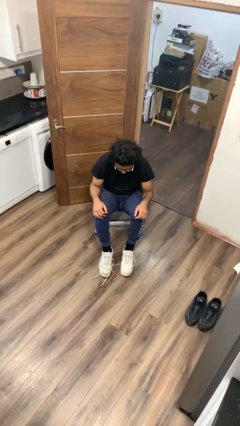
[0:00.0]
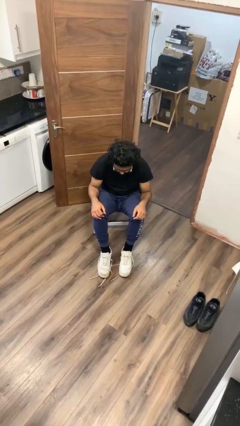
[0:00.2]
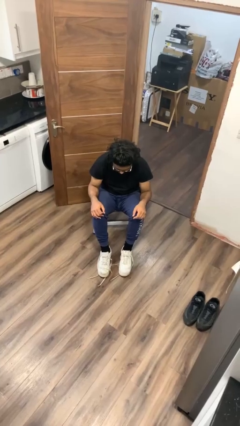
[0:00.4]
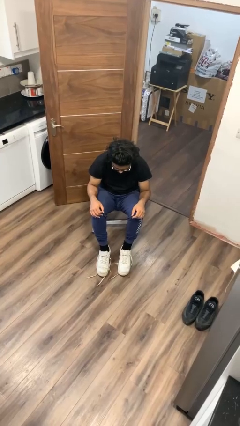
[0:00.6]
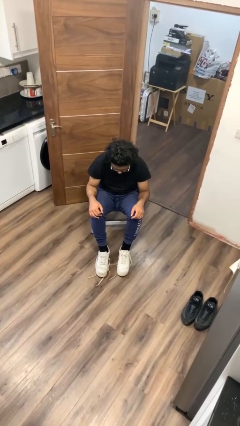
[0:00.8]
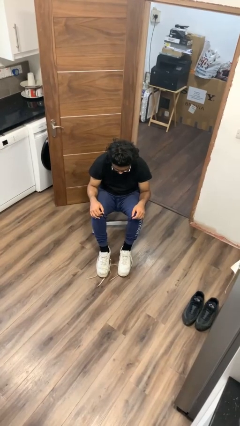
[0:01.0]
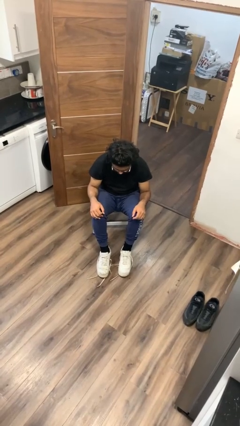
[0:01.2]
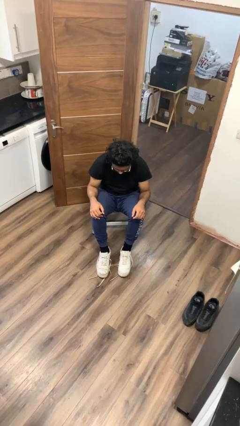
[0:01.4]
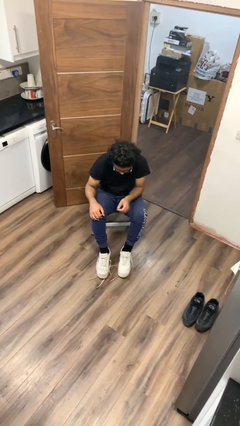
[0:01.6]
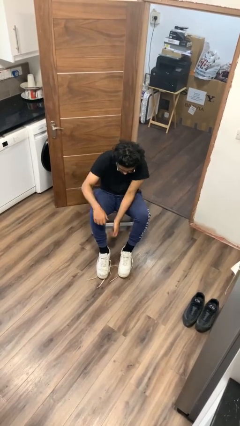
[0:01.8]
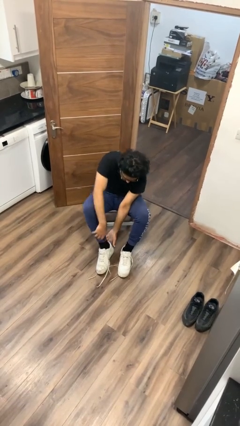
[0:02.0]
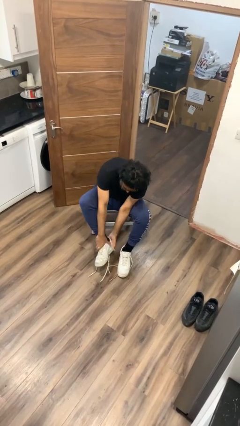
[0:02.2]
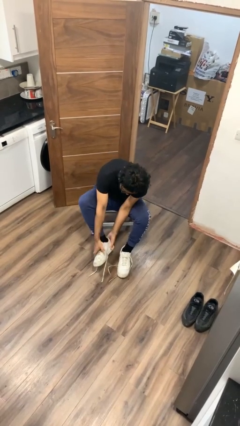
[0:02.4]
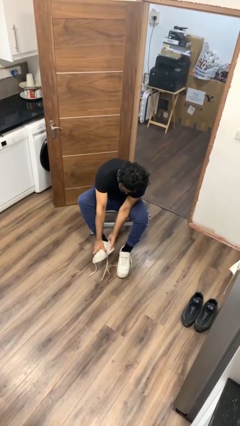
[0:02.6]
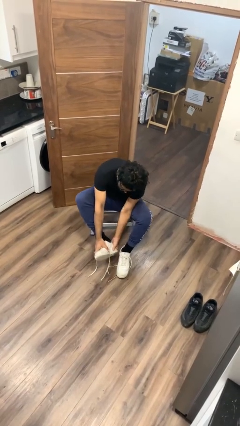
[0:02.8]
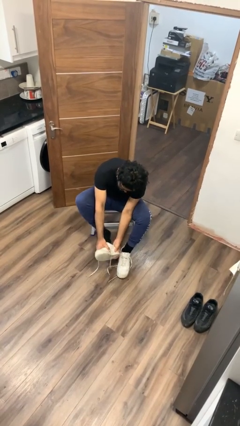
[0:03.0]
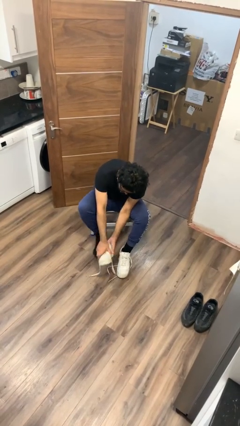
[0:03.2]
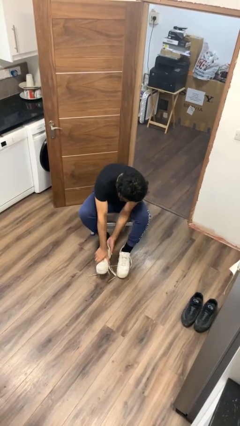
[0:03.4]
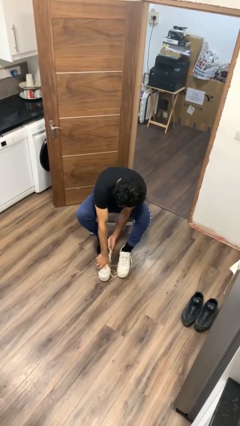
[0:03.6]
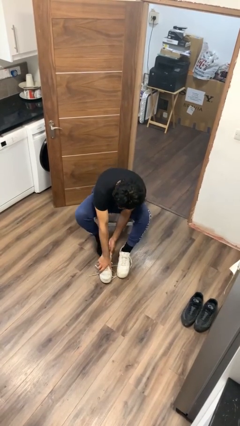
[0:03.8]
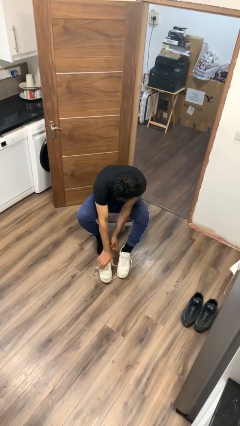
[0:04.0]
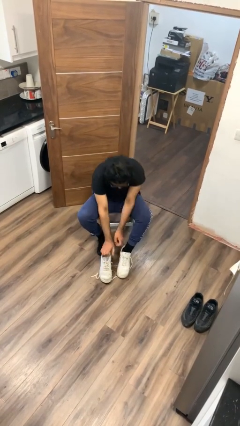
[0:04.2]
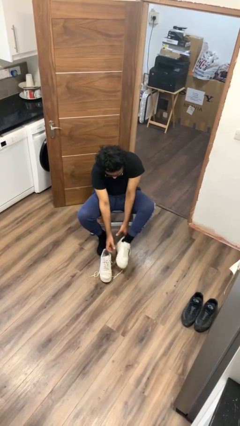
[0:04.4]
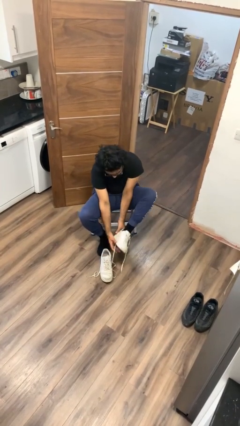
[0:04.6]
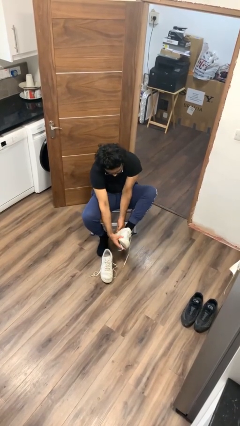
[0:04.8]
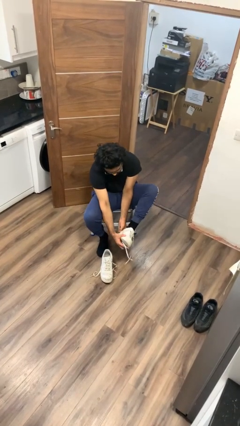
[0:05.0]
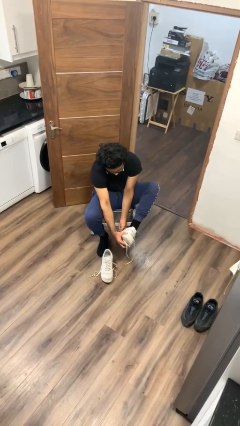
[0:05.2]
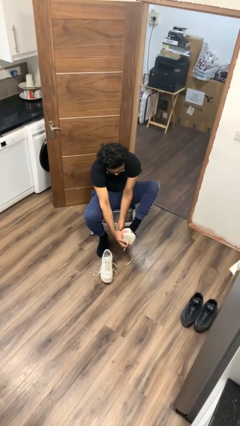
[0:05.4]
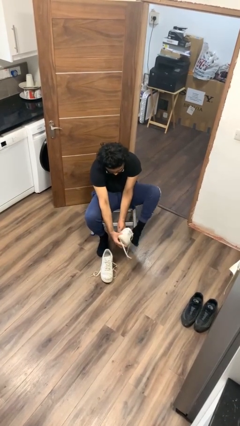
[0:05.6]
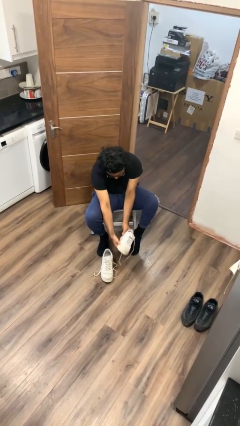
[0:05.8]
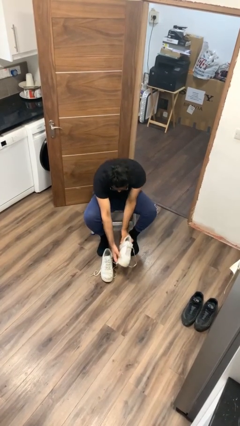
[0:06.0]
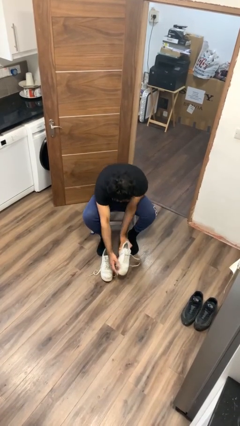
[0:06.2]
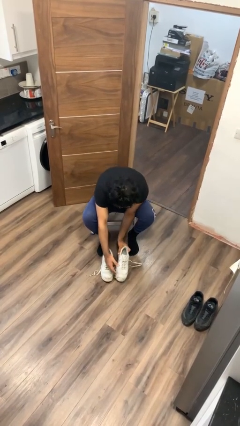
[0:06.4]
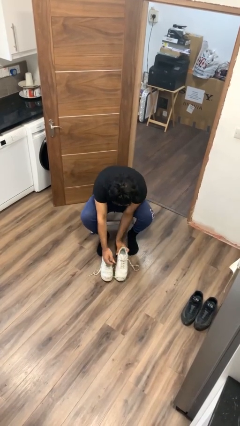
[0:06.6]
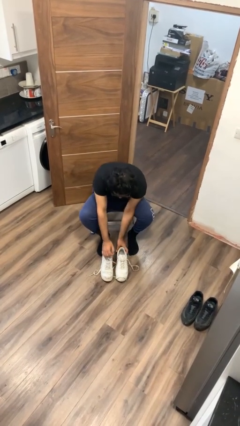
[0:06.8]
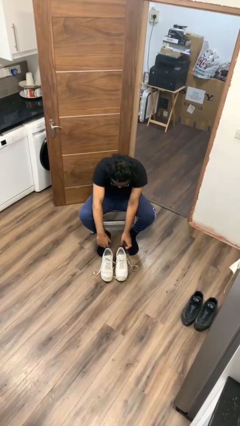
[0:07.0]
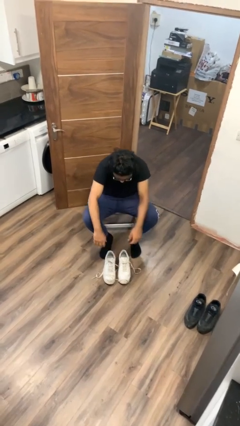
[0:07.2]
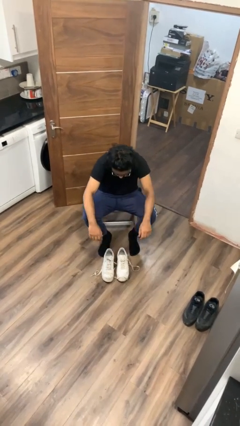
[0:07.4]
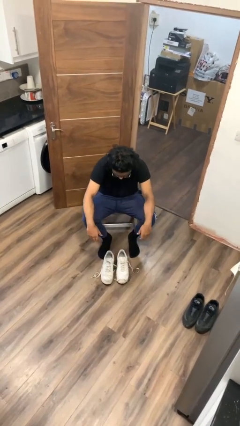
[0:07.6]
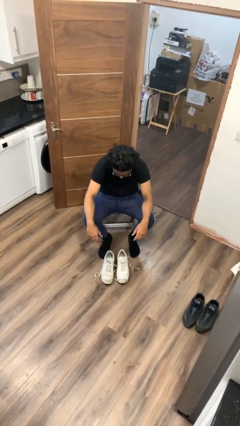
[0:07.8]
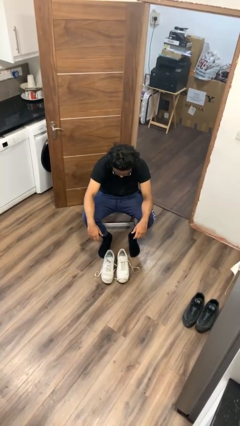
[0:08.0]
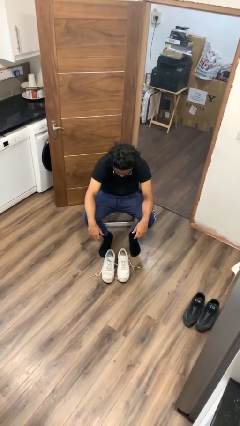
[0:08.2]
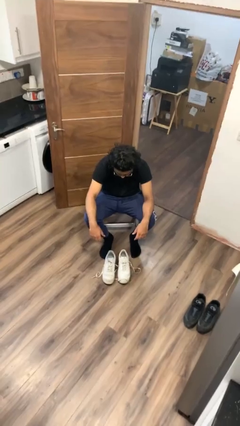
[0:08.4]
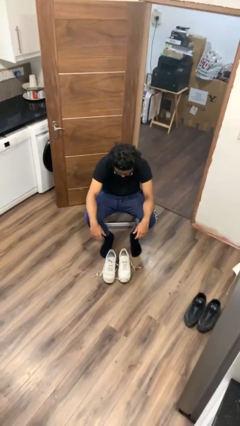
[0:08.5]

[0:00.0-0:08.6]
person takes off shoes

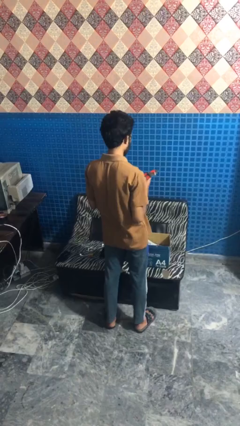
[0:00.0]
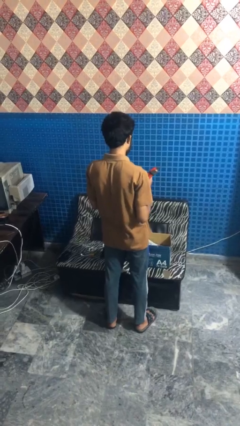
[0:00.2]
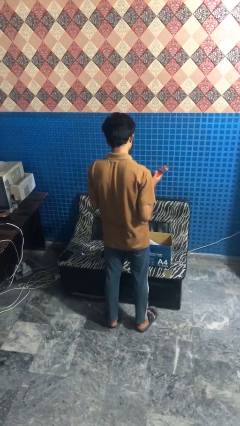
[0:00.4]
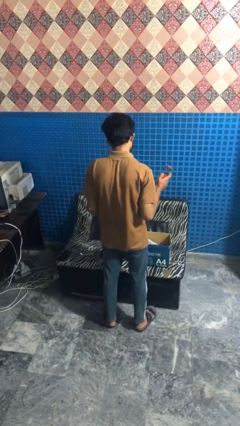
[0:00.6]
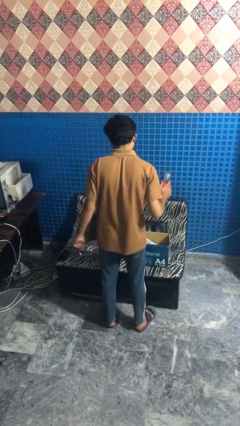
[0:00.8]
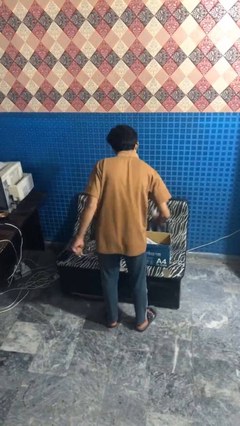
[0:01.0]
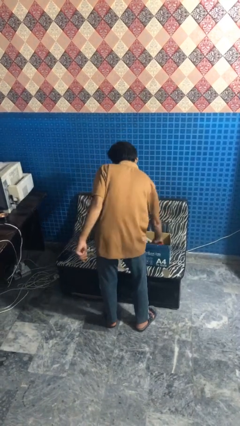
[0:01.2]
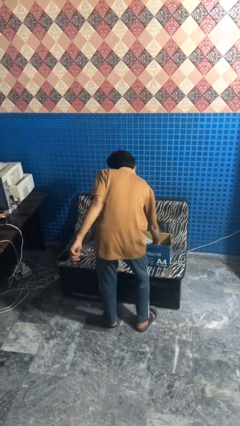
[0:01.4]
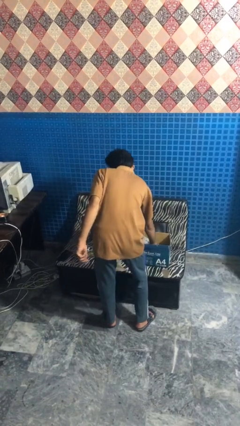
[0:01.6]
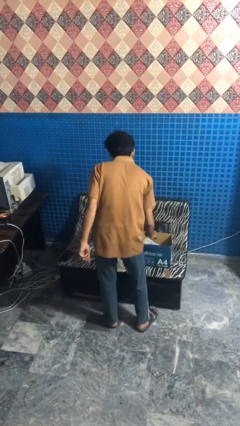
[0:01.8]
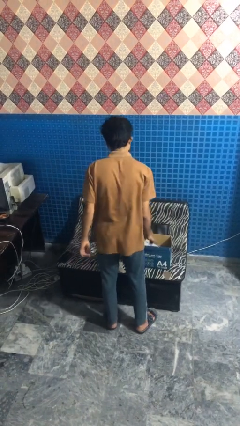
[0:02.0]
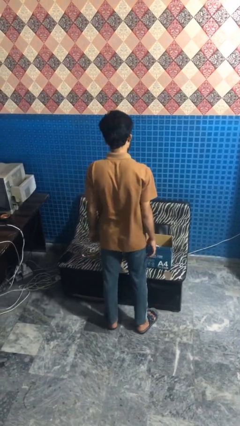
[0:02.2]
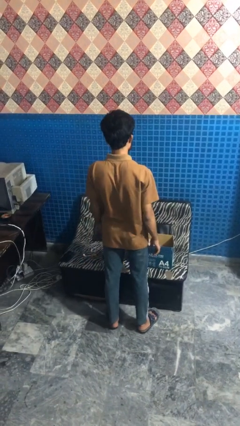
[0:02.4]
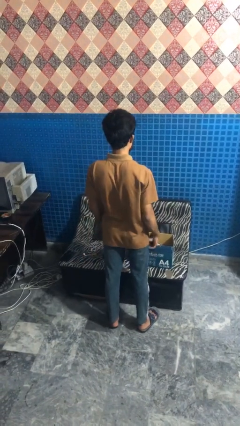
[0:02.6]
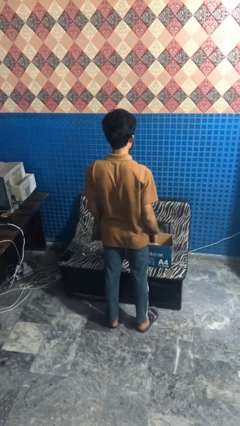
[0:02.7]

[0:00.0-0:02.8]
person puts object into box

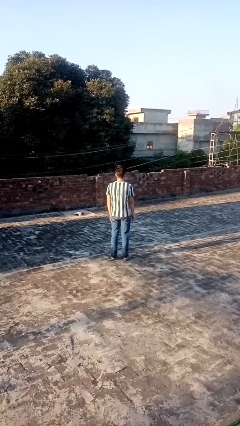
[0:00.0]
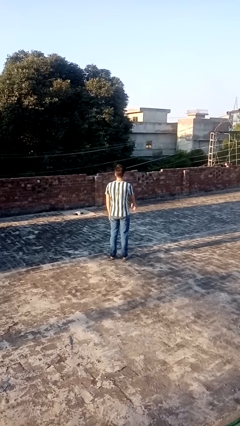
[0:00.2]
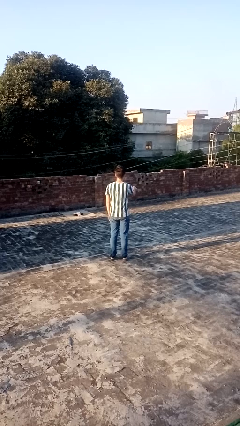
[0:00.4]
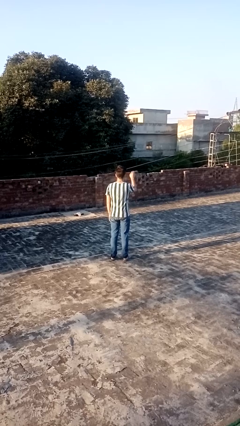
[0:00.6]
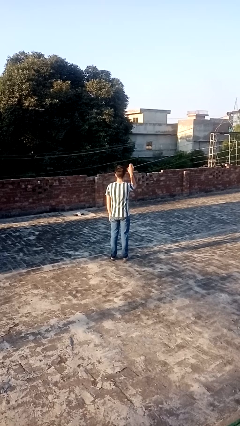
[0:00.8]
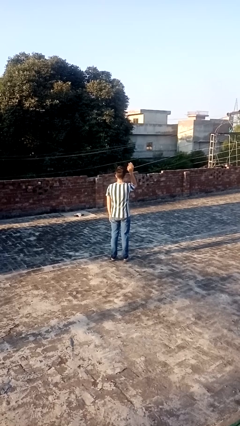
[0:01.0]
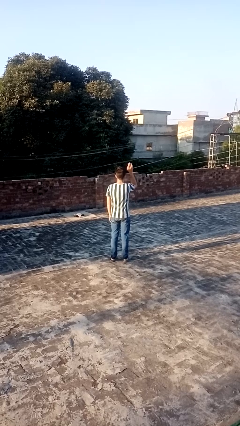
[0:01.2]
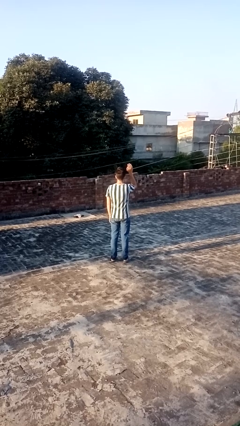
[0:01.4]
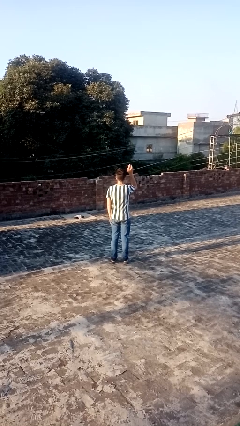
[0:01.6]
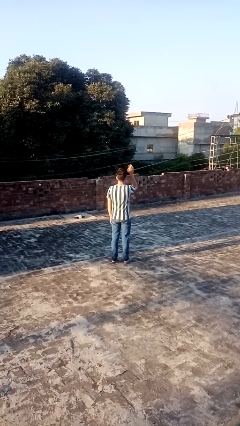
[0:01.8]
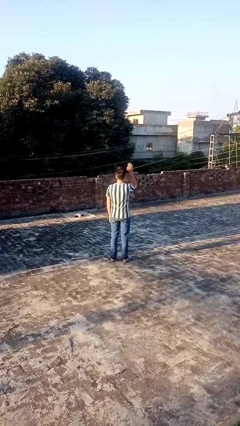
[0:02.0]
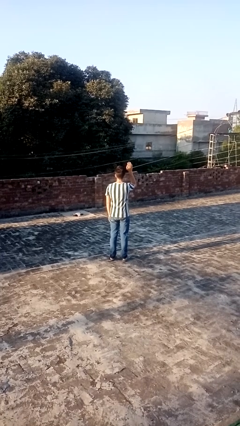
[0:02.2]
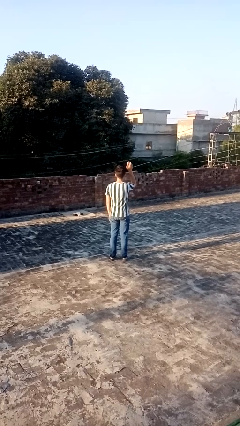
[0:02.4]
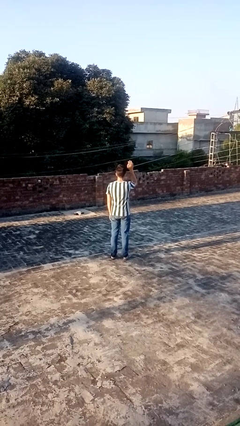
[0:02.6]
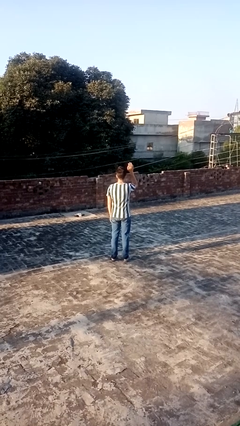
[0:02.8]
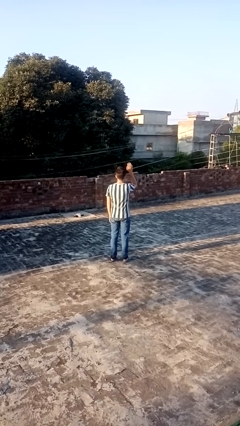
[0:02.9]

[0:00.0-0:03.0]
person gestures raise hand

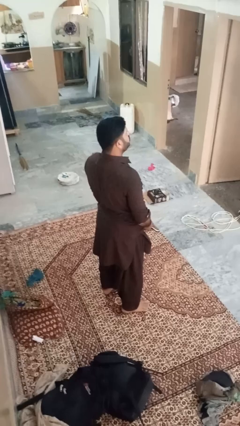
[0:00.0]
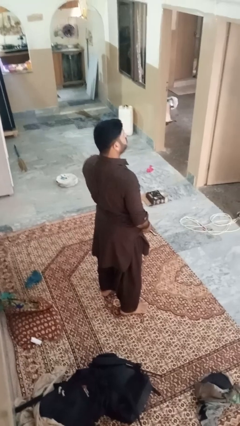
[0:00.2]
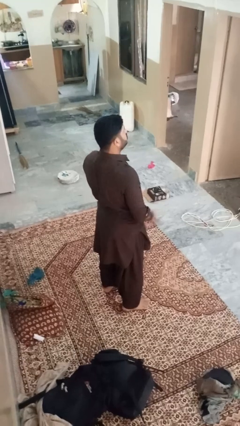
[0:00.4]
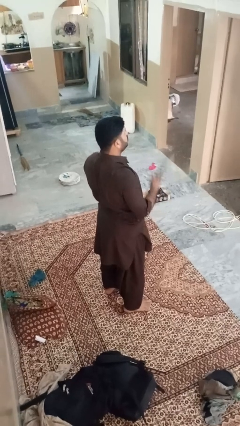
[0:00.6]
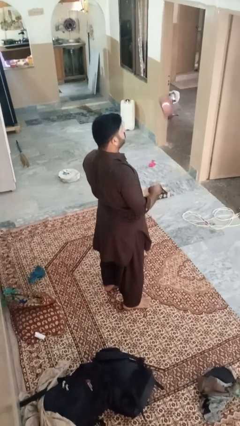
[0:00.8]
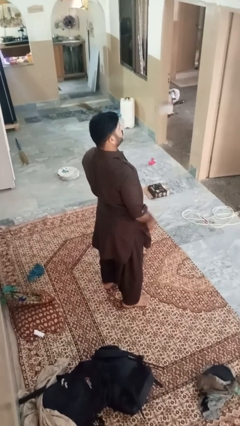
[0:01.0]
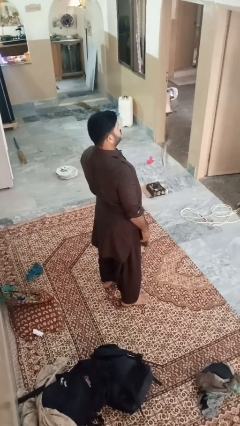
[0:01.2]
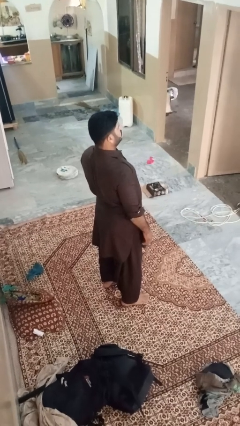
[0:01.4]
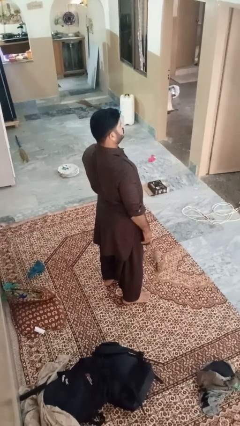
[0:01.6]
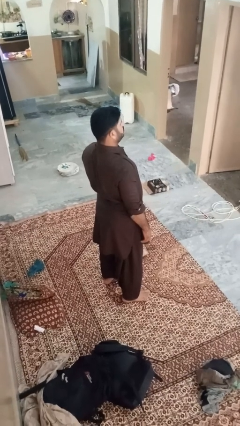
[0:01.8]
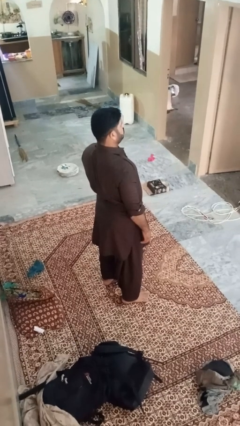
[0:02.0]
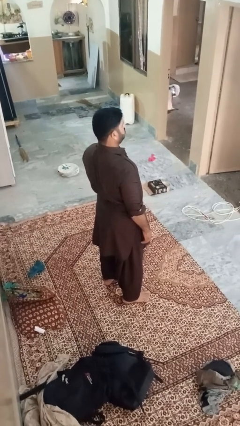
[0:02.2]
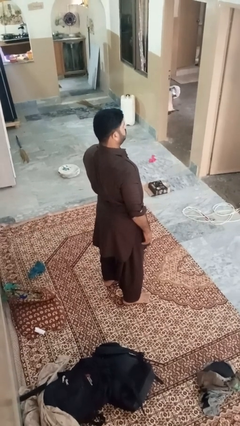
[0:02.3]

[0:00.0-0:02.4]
person throws object into air

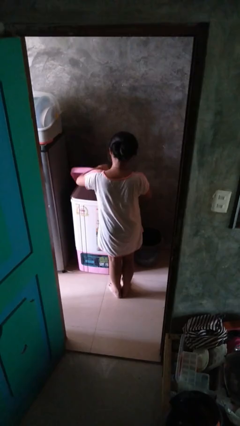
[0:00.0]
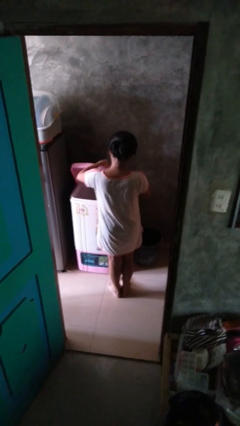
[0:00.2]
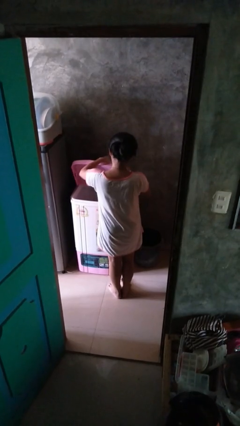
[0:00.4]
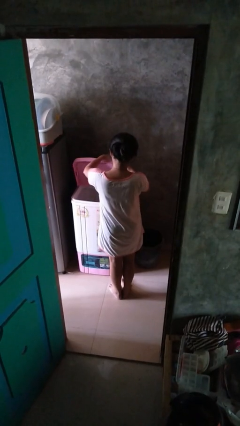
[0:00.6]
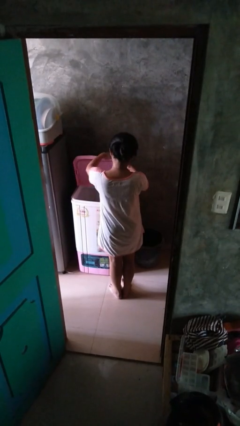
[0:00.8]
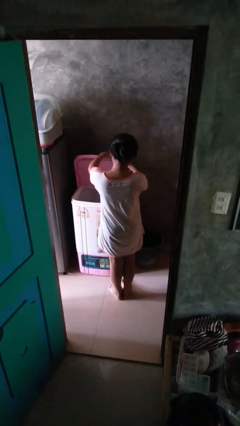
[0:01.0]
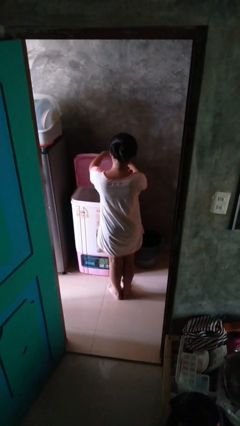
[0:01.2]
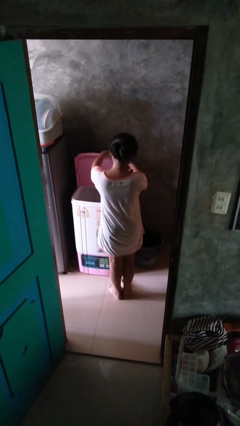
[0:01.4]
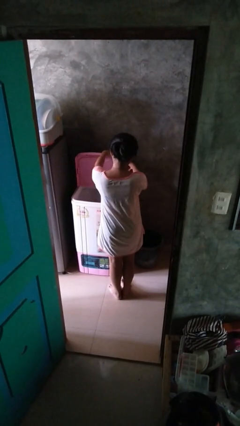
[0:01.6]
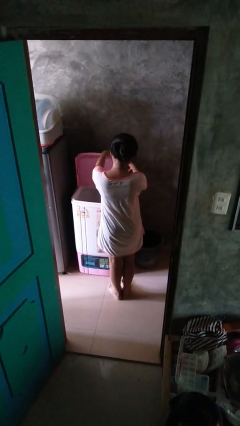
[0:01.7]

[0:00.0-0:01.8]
person opens clothes washer
